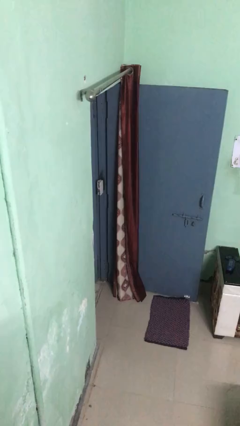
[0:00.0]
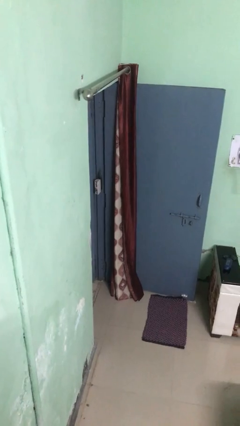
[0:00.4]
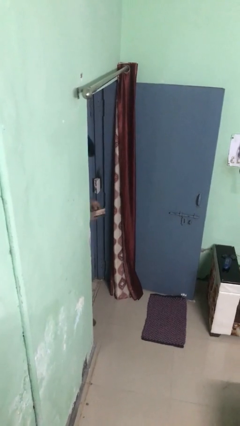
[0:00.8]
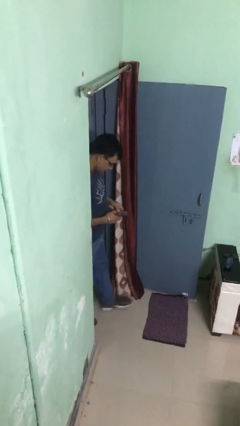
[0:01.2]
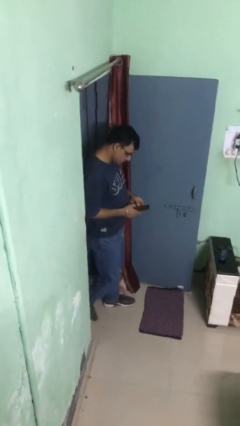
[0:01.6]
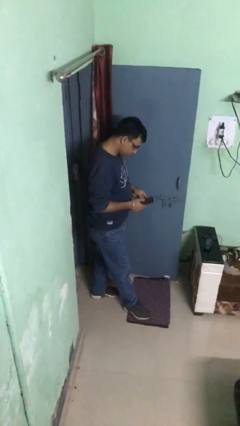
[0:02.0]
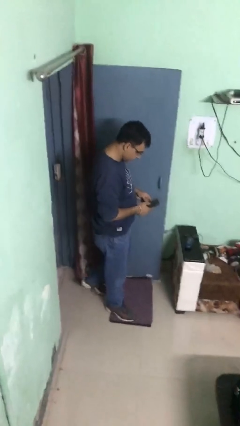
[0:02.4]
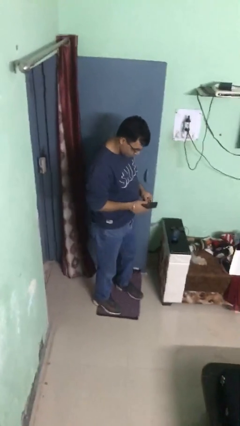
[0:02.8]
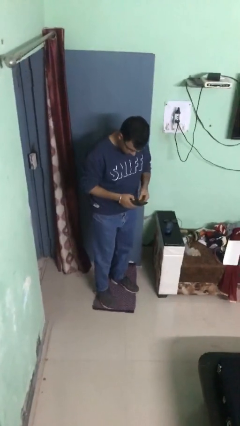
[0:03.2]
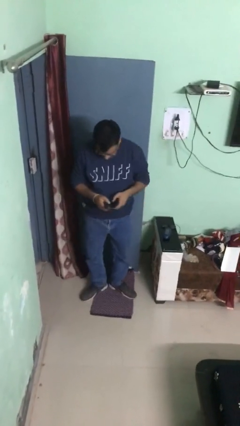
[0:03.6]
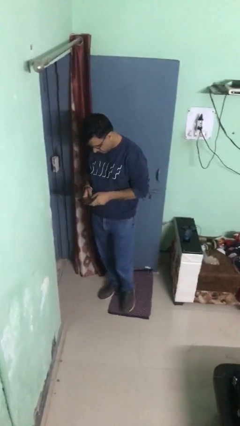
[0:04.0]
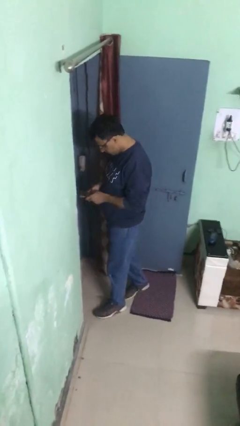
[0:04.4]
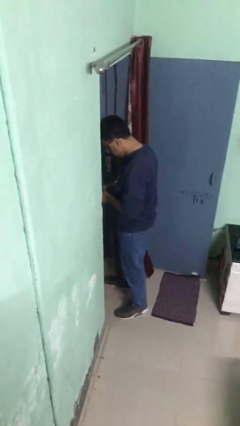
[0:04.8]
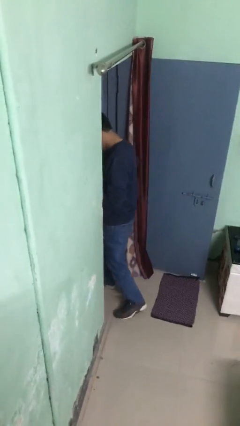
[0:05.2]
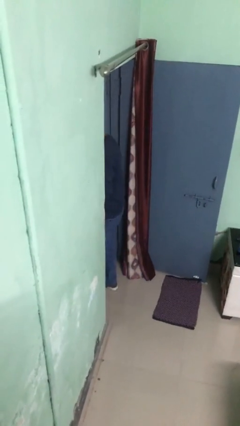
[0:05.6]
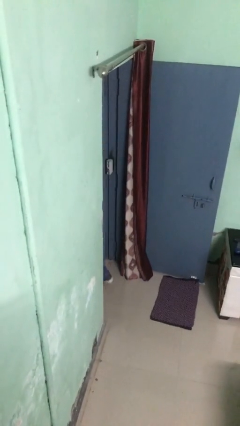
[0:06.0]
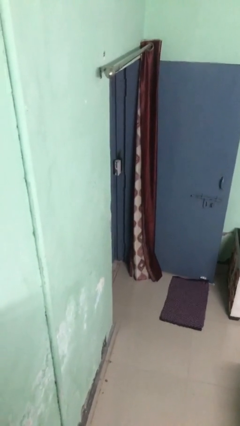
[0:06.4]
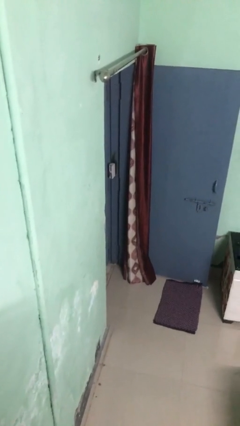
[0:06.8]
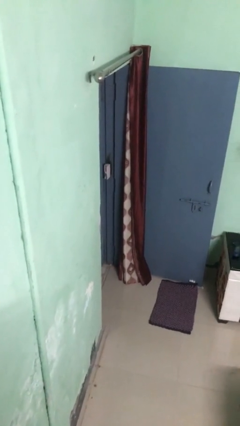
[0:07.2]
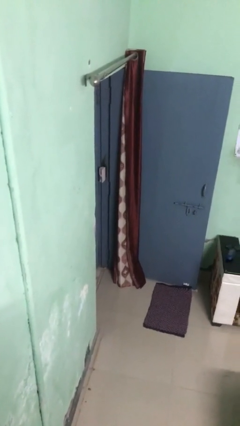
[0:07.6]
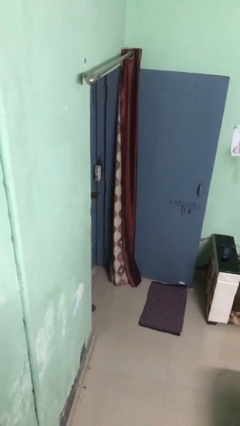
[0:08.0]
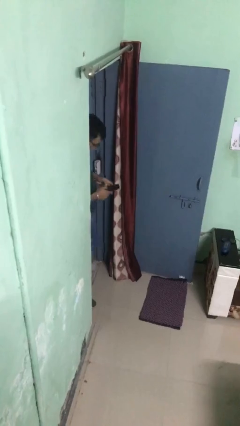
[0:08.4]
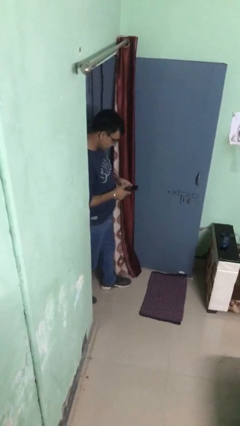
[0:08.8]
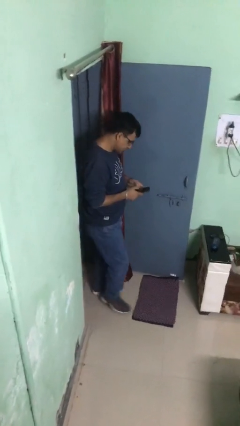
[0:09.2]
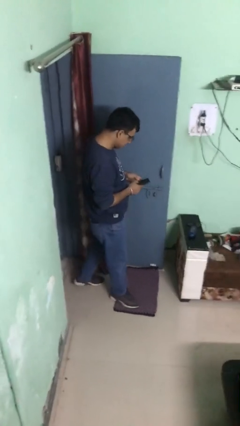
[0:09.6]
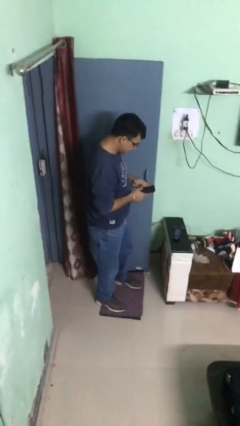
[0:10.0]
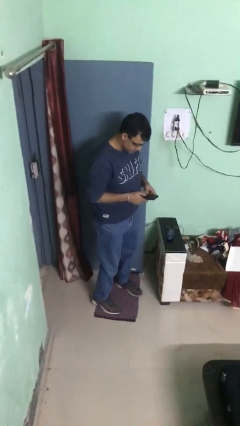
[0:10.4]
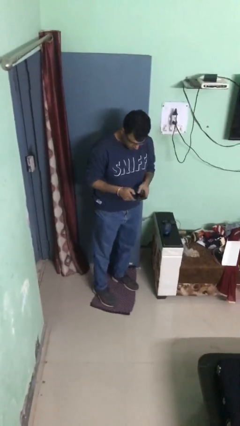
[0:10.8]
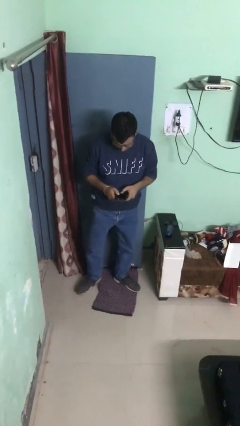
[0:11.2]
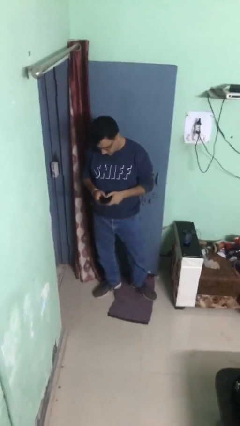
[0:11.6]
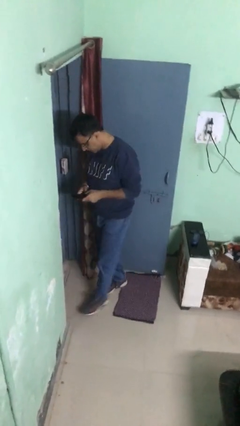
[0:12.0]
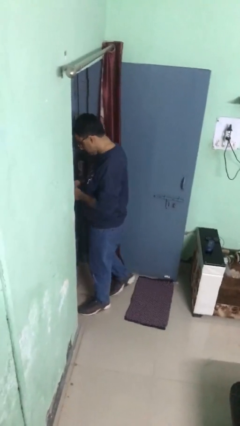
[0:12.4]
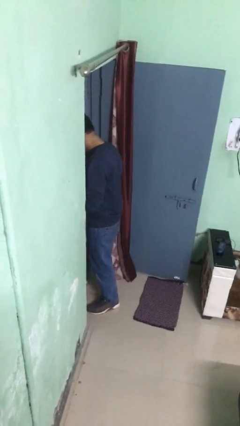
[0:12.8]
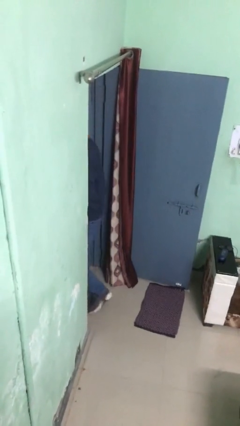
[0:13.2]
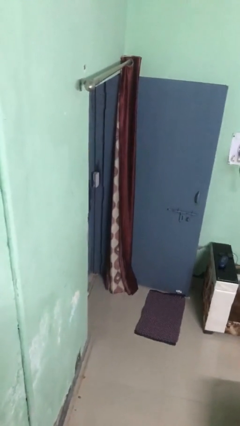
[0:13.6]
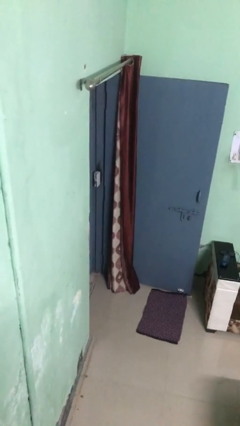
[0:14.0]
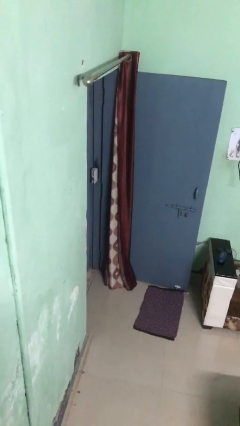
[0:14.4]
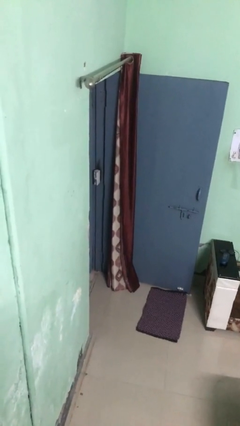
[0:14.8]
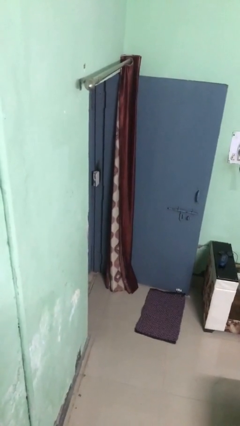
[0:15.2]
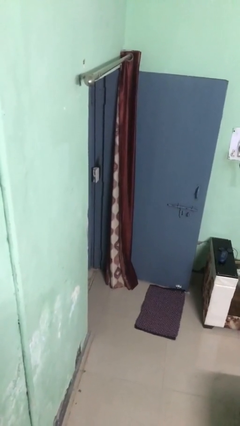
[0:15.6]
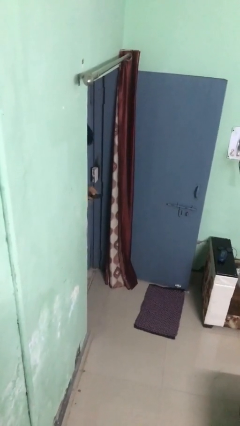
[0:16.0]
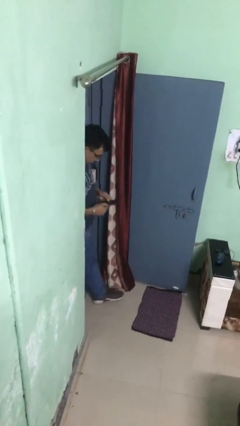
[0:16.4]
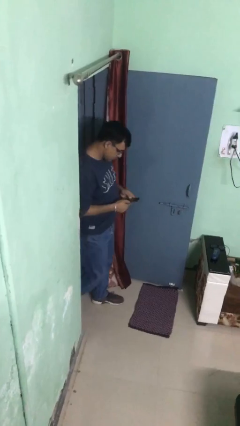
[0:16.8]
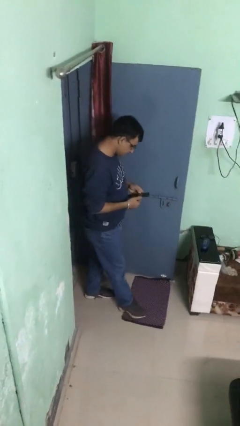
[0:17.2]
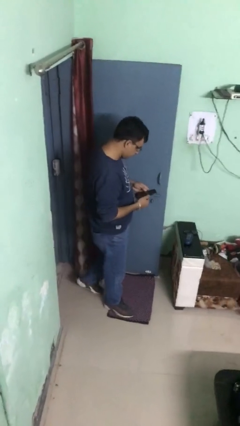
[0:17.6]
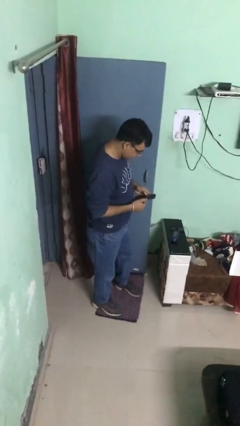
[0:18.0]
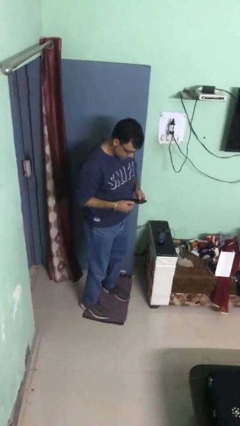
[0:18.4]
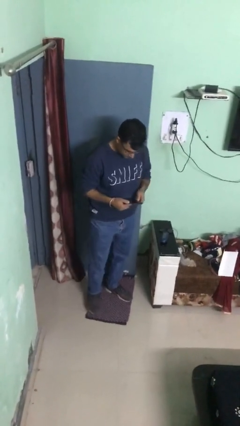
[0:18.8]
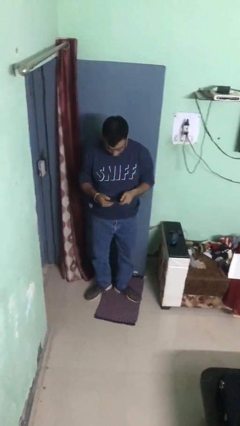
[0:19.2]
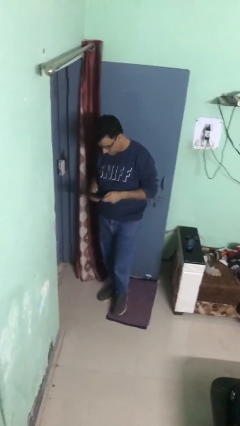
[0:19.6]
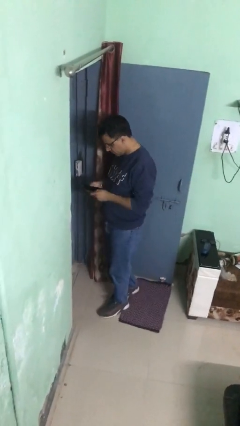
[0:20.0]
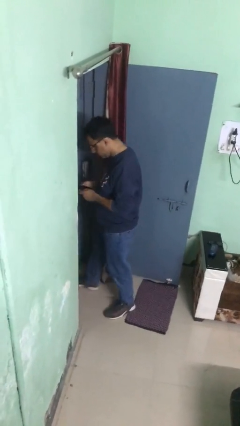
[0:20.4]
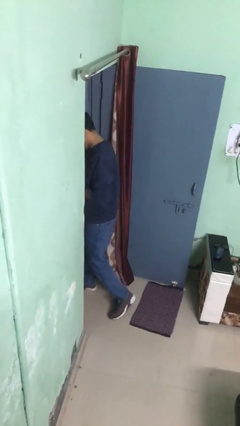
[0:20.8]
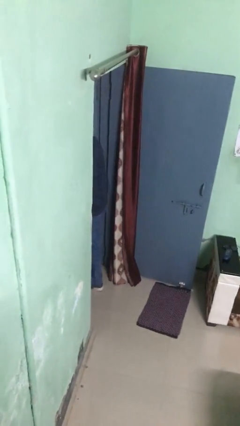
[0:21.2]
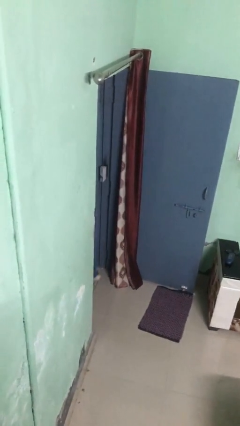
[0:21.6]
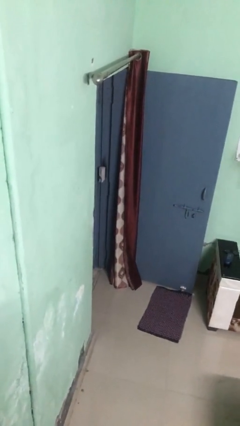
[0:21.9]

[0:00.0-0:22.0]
person texts on phone

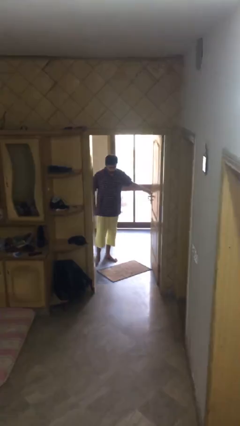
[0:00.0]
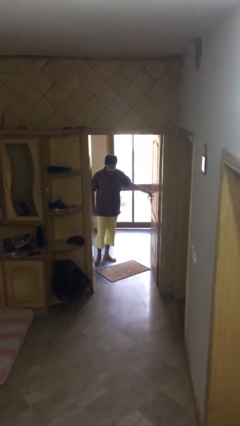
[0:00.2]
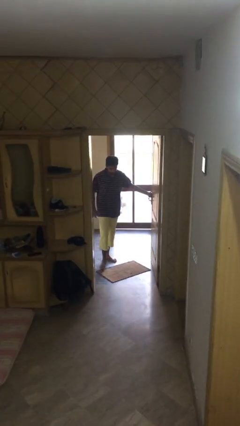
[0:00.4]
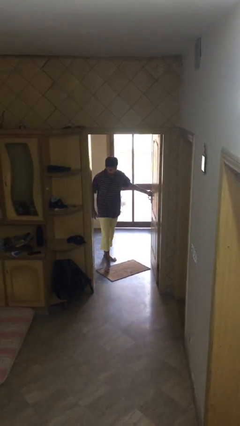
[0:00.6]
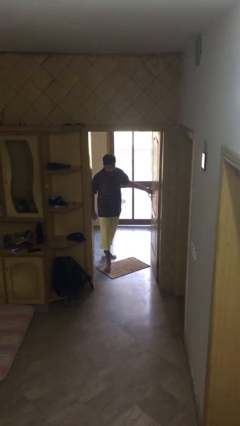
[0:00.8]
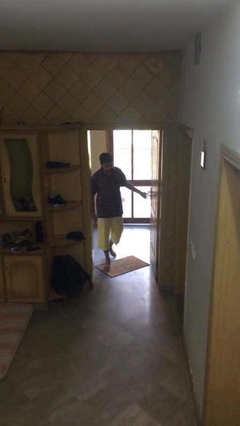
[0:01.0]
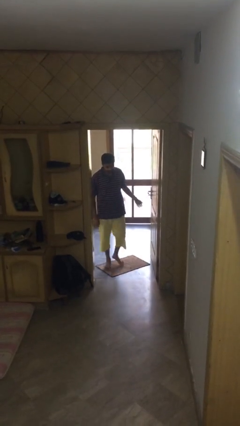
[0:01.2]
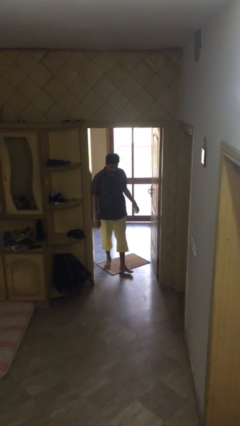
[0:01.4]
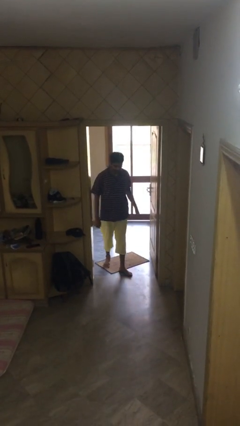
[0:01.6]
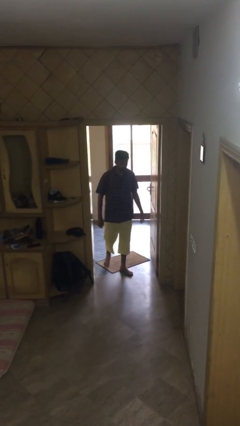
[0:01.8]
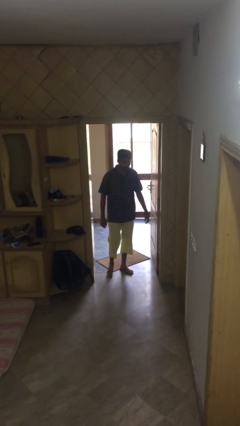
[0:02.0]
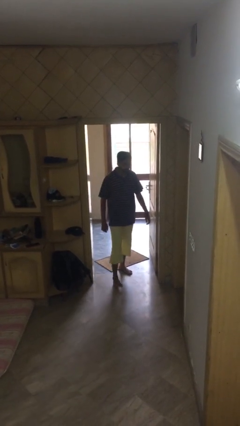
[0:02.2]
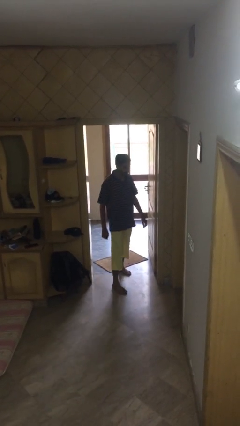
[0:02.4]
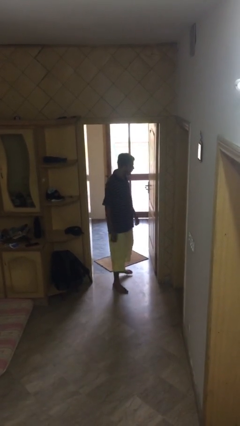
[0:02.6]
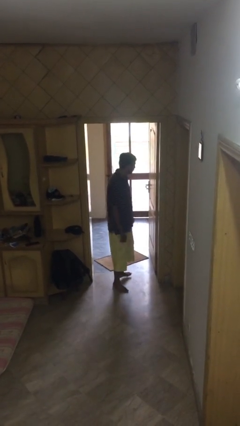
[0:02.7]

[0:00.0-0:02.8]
person enters scene through structure

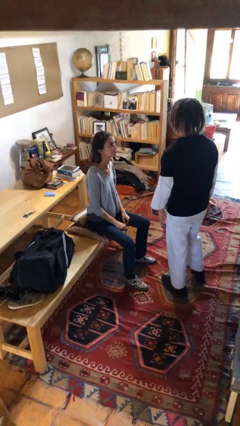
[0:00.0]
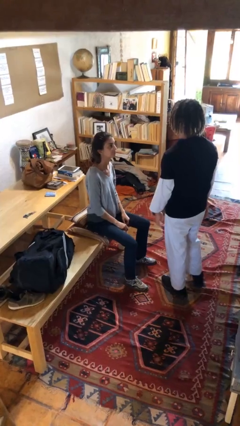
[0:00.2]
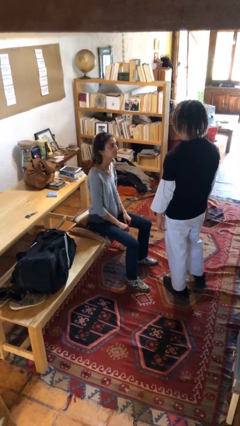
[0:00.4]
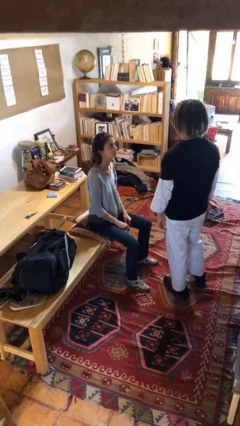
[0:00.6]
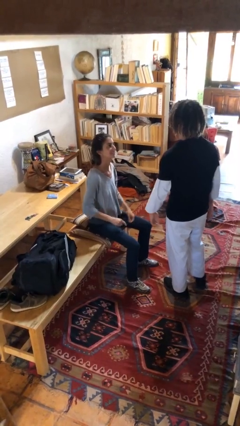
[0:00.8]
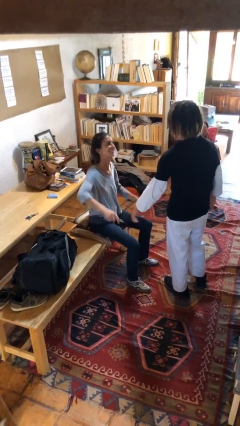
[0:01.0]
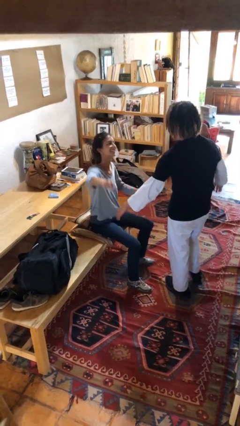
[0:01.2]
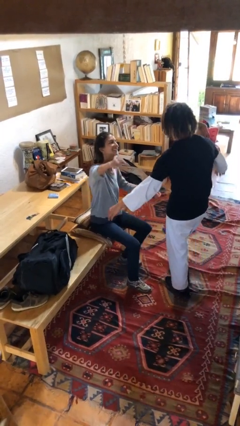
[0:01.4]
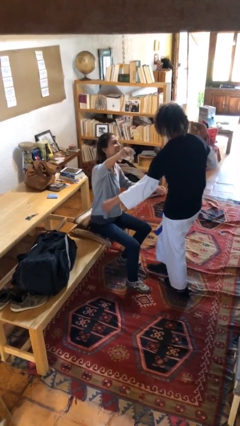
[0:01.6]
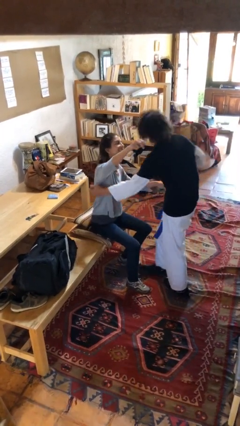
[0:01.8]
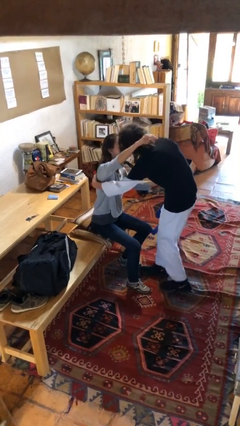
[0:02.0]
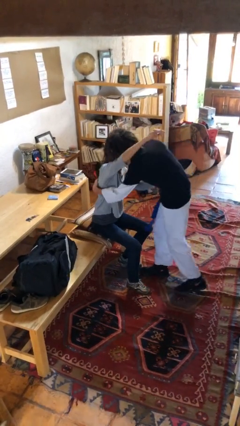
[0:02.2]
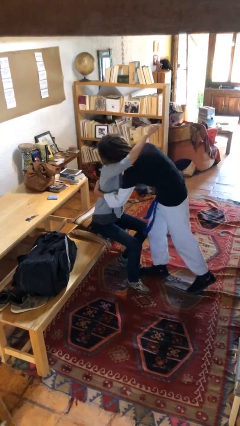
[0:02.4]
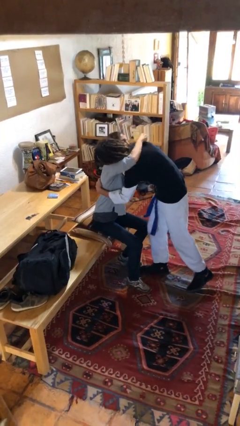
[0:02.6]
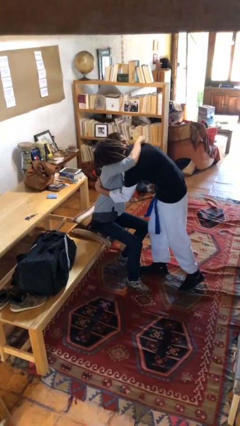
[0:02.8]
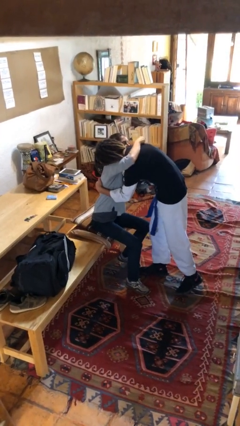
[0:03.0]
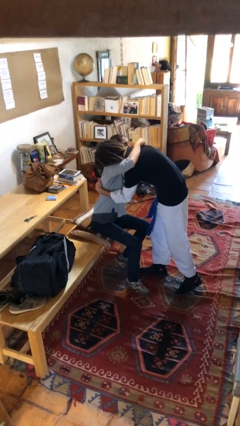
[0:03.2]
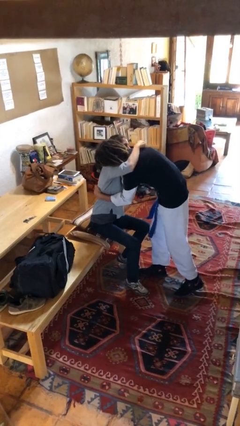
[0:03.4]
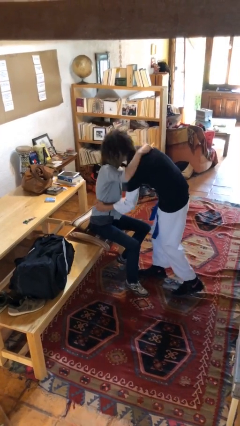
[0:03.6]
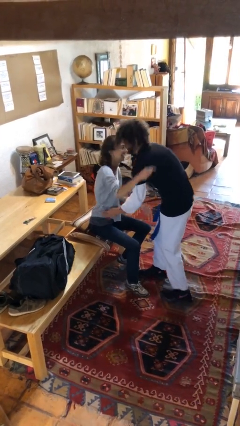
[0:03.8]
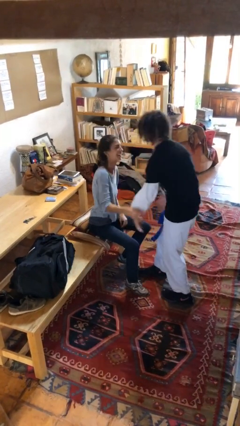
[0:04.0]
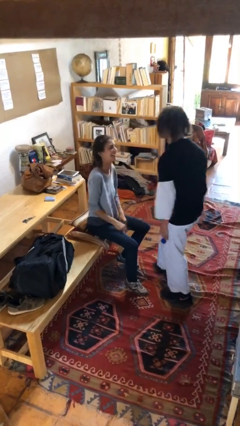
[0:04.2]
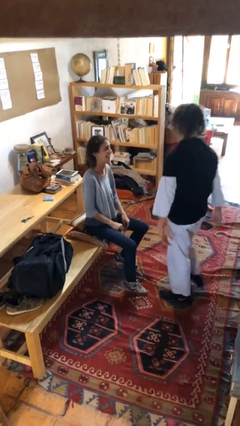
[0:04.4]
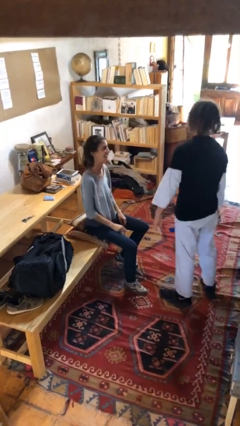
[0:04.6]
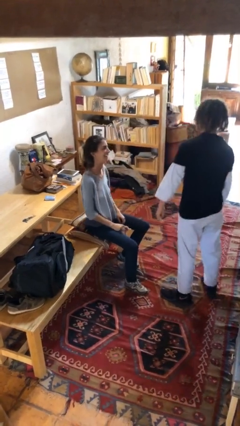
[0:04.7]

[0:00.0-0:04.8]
person embraces person
